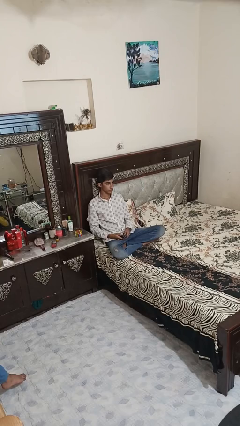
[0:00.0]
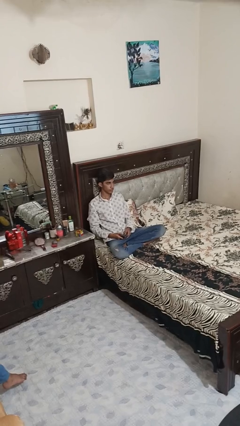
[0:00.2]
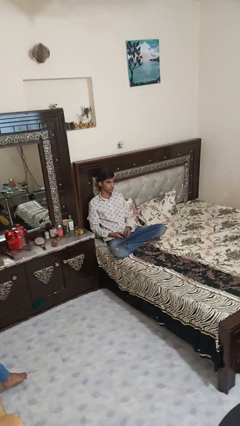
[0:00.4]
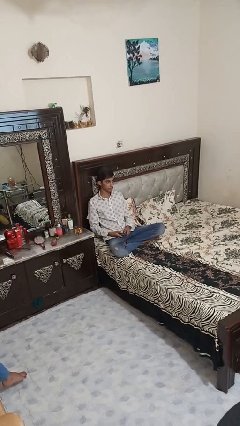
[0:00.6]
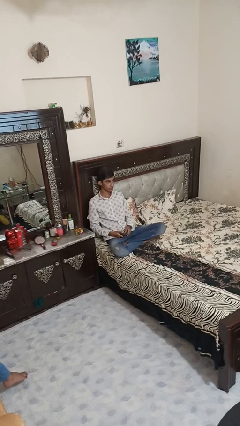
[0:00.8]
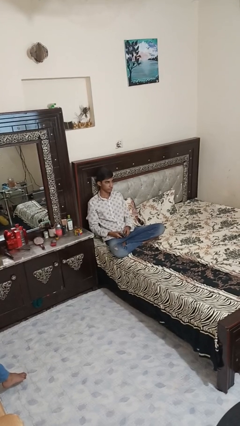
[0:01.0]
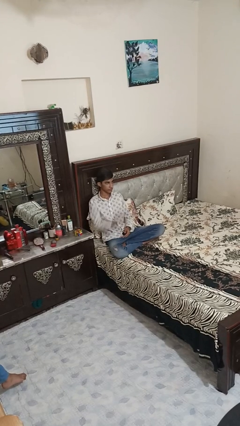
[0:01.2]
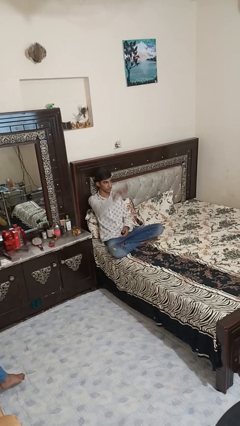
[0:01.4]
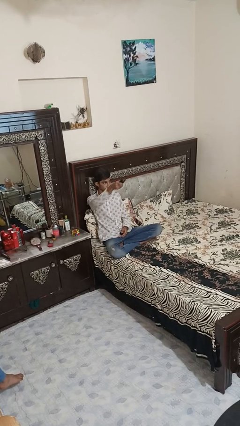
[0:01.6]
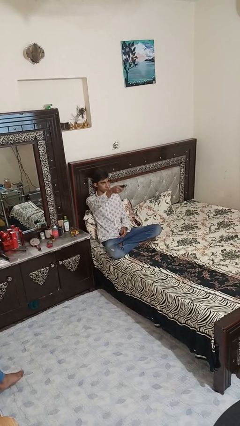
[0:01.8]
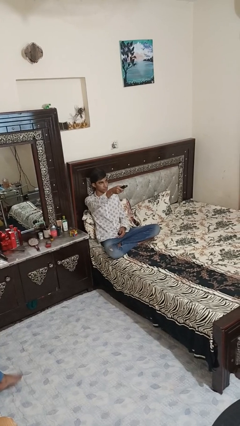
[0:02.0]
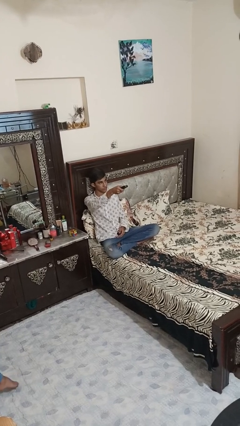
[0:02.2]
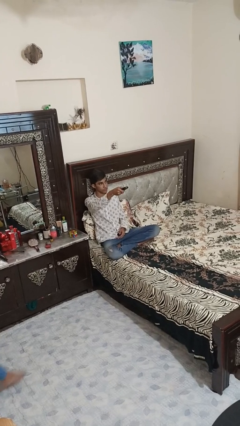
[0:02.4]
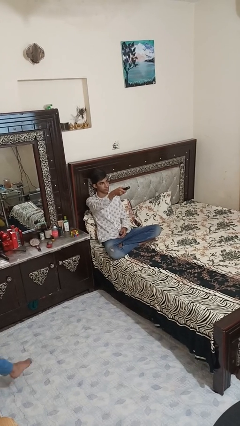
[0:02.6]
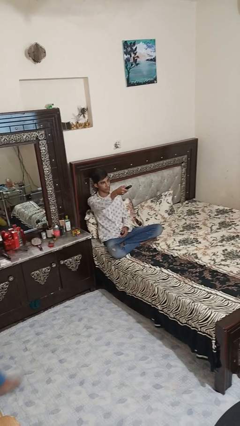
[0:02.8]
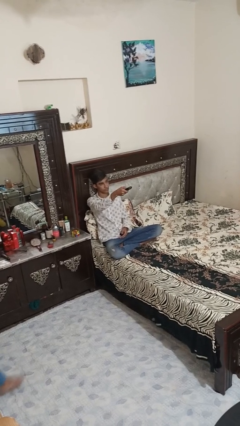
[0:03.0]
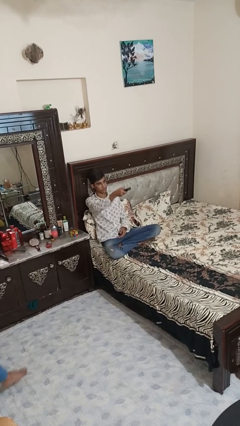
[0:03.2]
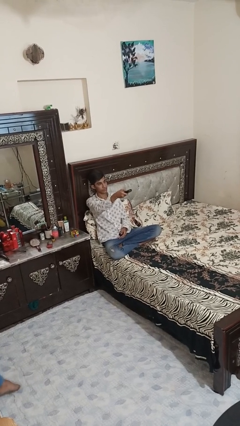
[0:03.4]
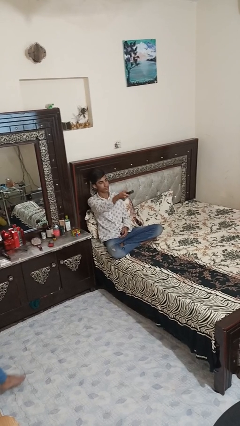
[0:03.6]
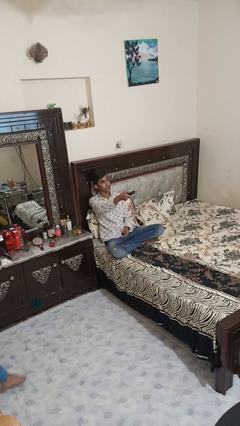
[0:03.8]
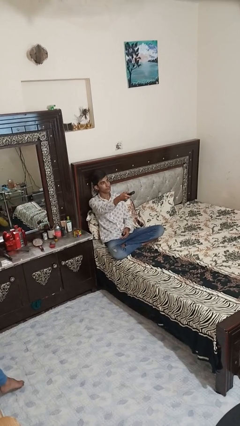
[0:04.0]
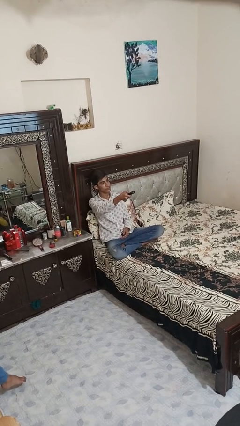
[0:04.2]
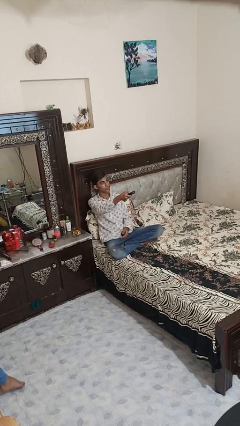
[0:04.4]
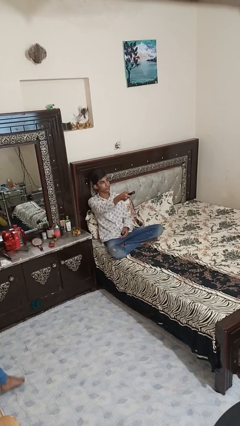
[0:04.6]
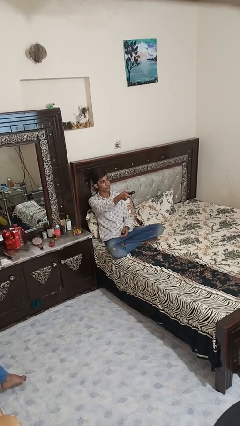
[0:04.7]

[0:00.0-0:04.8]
person uses television remote

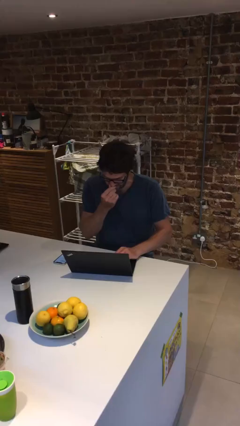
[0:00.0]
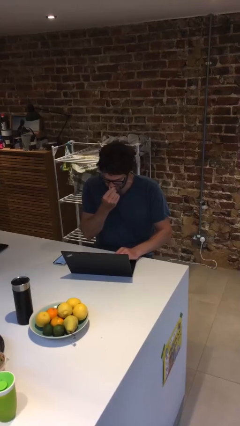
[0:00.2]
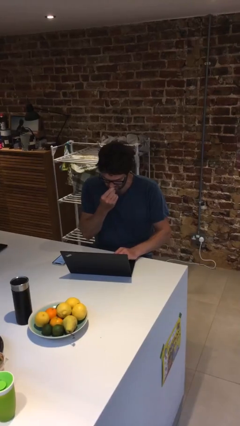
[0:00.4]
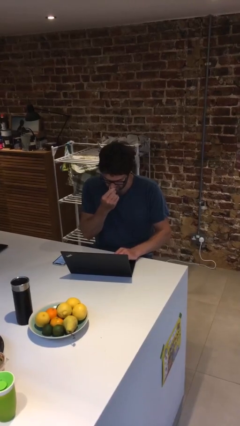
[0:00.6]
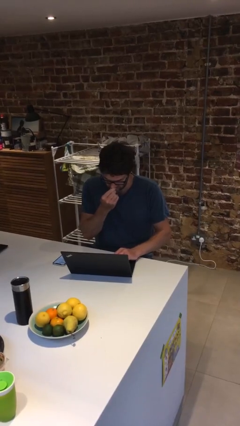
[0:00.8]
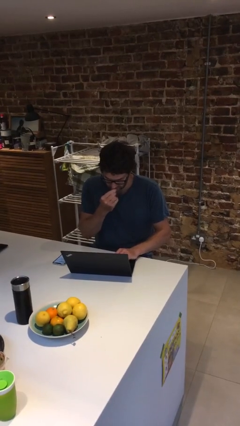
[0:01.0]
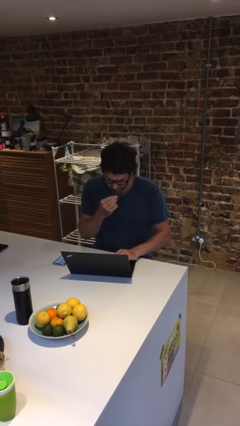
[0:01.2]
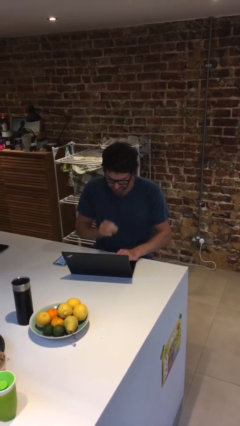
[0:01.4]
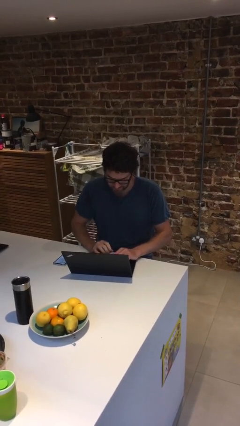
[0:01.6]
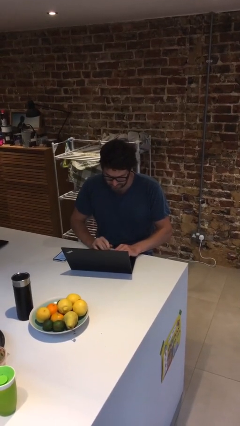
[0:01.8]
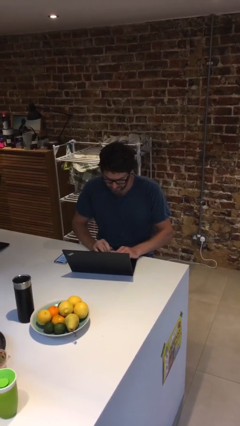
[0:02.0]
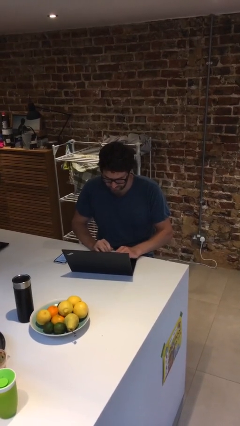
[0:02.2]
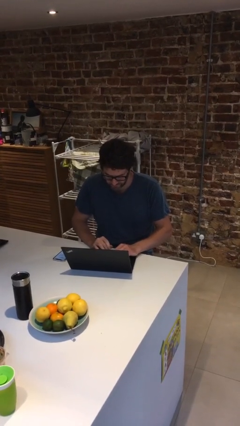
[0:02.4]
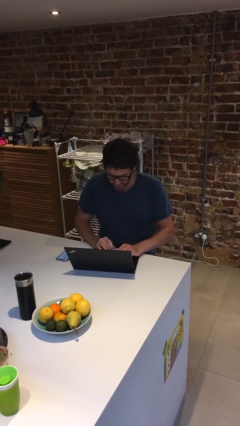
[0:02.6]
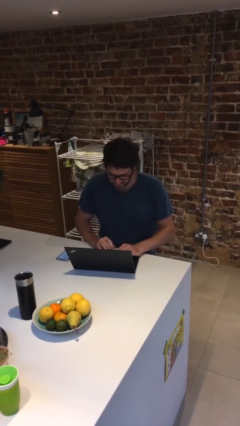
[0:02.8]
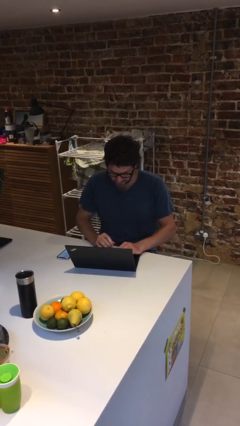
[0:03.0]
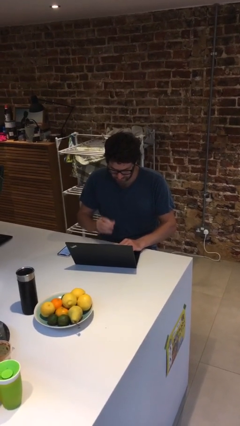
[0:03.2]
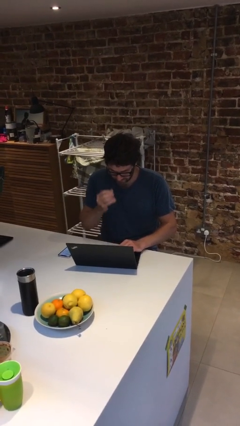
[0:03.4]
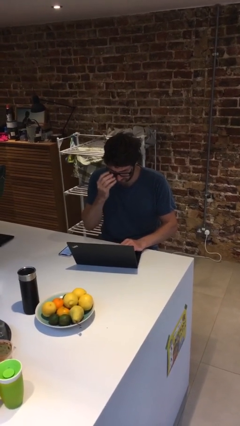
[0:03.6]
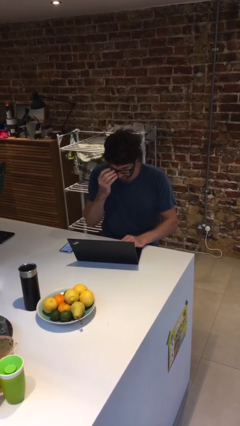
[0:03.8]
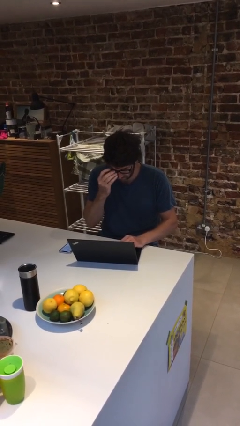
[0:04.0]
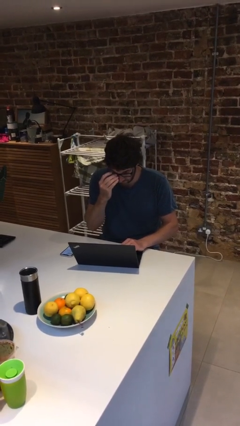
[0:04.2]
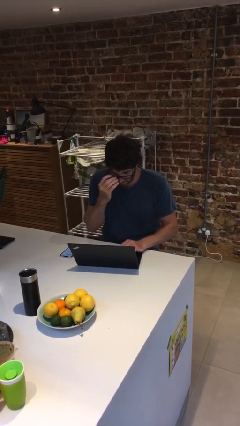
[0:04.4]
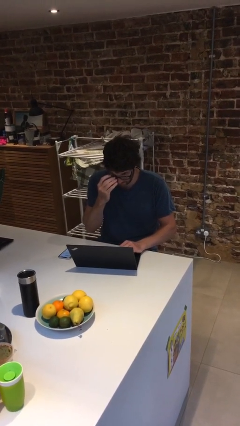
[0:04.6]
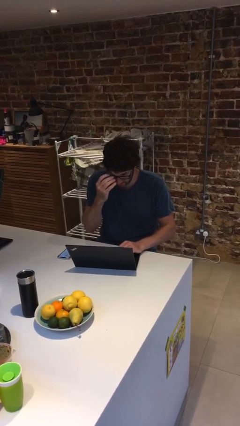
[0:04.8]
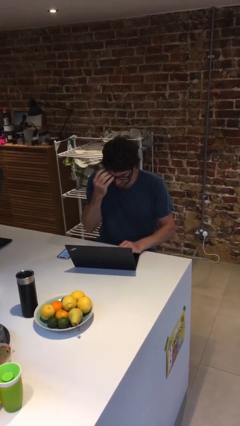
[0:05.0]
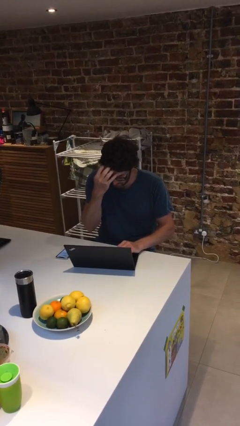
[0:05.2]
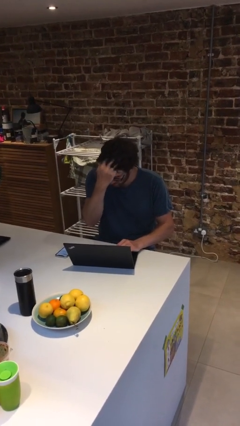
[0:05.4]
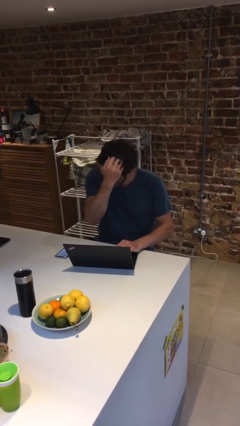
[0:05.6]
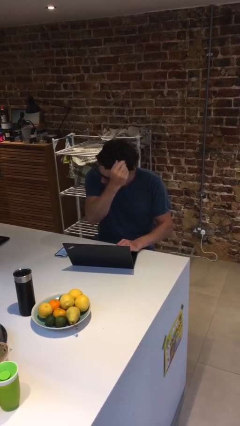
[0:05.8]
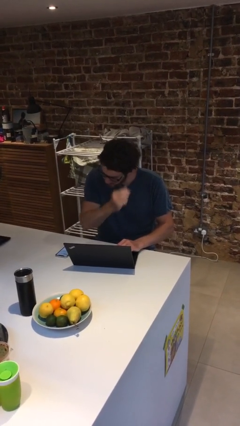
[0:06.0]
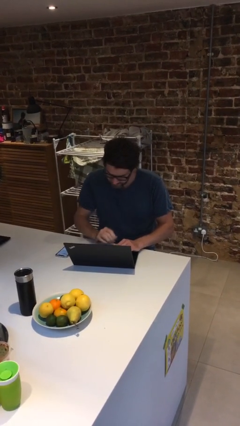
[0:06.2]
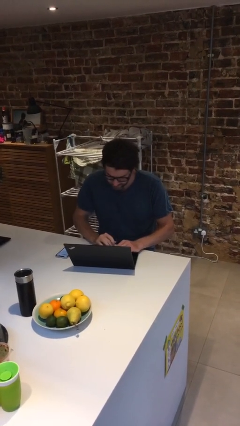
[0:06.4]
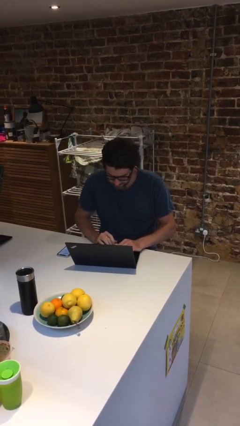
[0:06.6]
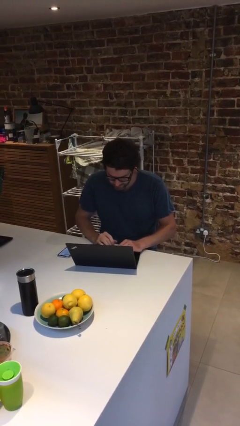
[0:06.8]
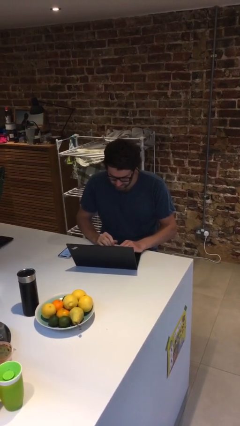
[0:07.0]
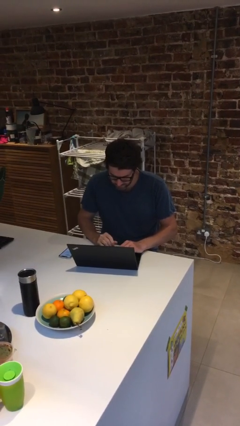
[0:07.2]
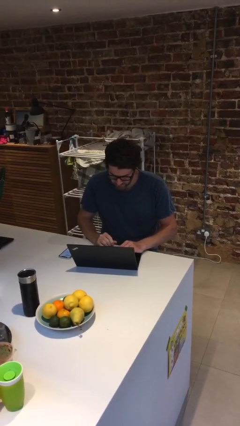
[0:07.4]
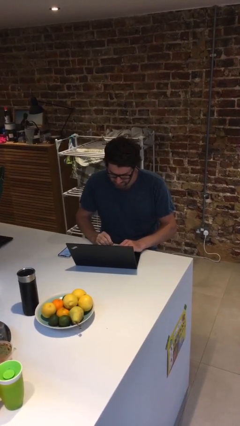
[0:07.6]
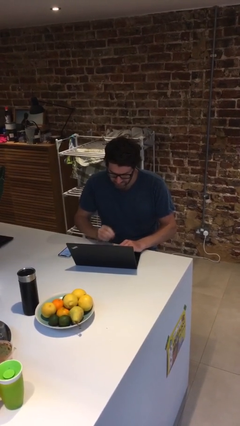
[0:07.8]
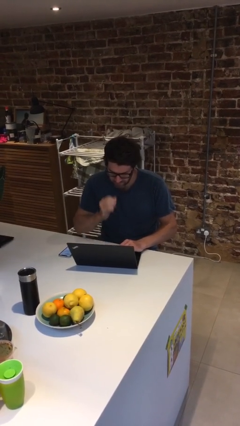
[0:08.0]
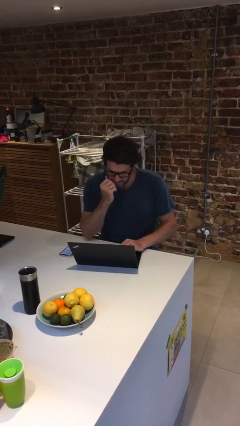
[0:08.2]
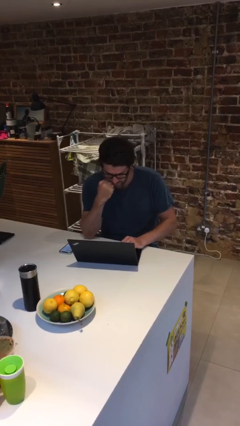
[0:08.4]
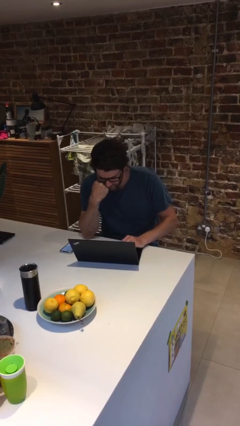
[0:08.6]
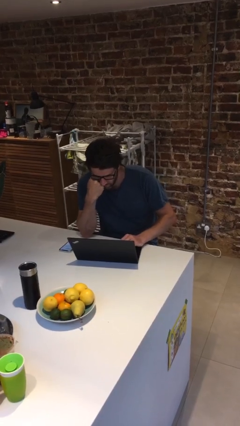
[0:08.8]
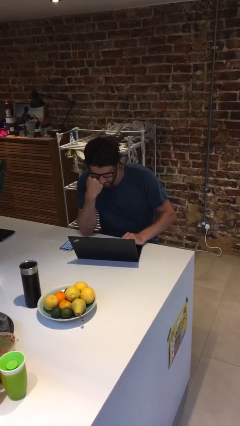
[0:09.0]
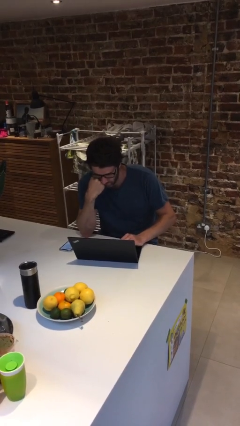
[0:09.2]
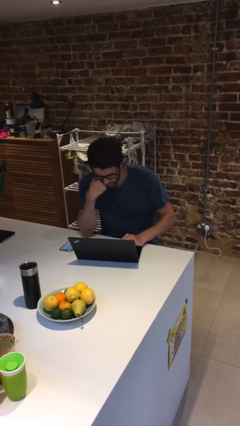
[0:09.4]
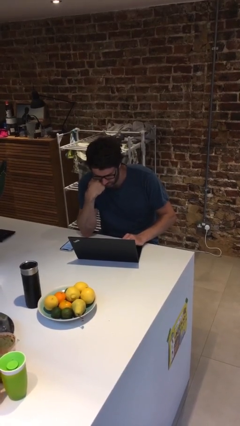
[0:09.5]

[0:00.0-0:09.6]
person interacts with laptop

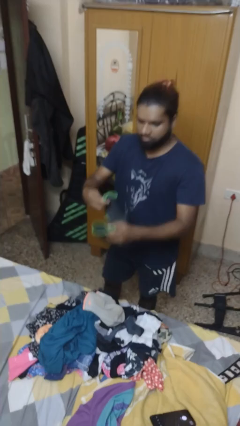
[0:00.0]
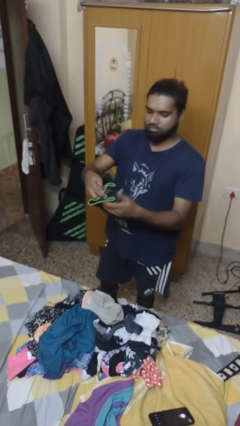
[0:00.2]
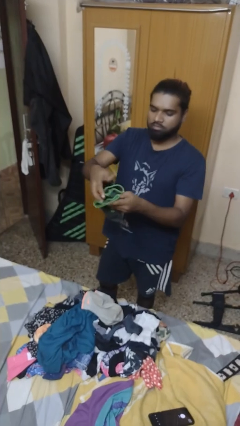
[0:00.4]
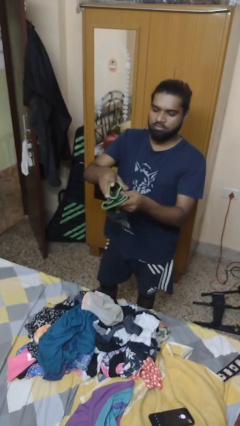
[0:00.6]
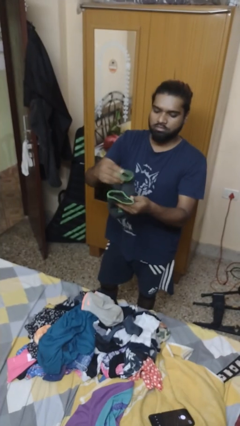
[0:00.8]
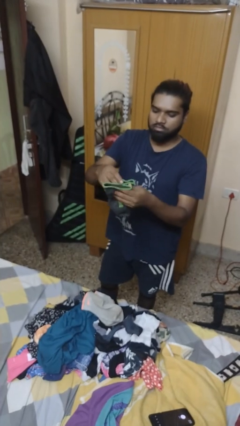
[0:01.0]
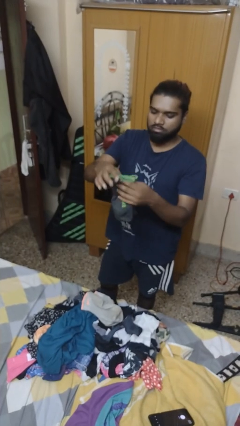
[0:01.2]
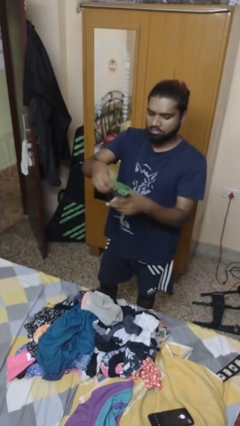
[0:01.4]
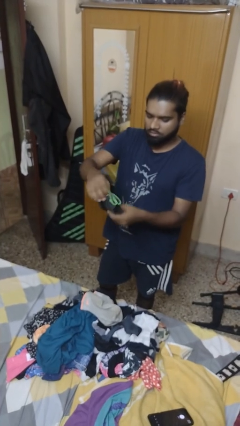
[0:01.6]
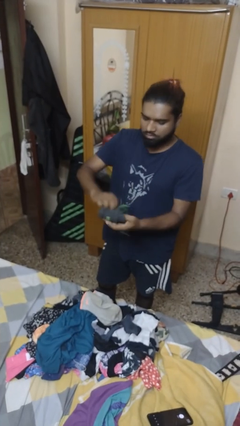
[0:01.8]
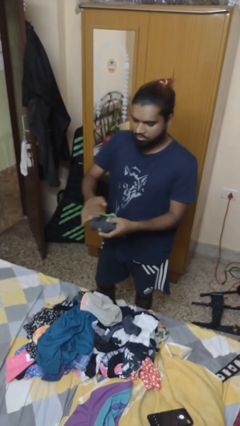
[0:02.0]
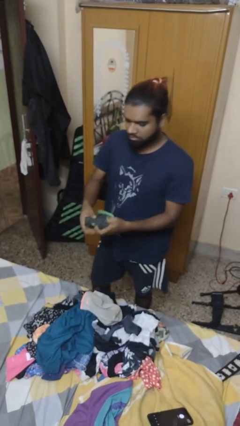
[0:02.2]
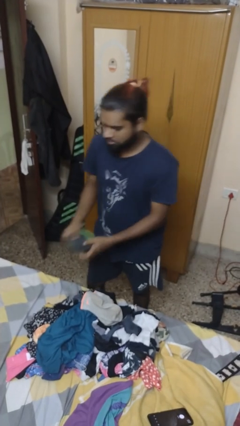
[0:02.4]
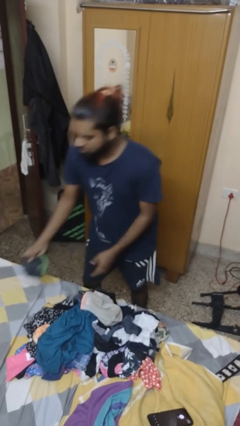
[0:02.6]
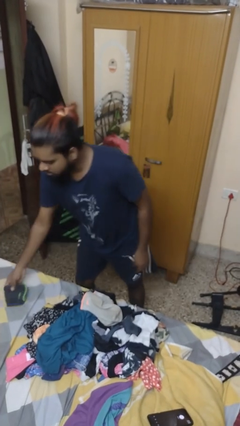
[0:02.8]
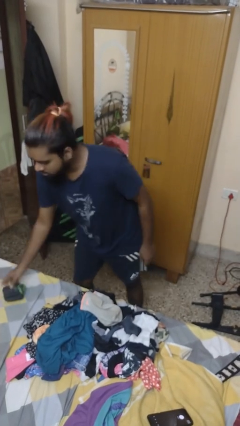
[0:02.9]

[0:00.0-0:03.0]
person folds socks

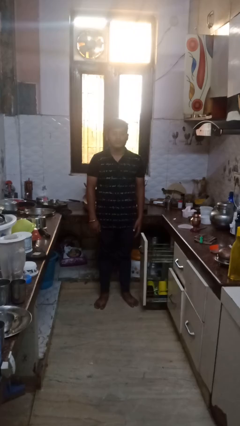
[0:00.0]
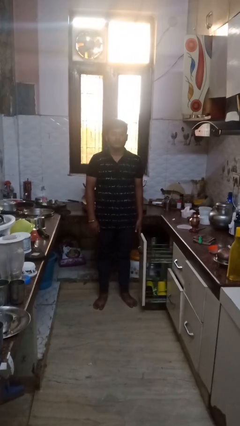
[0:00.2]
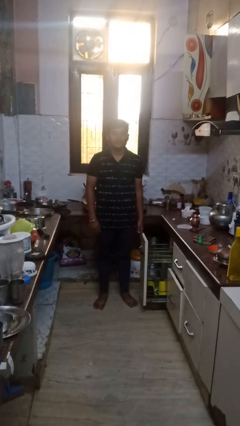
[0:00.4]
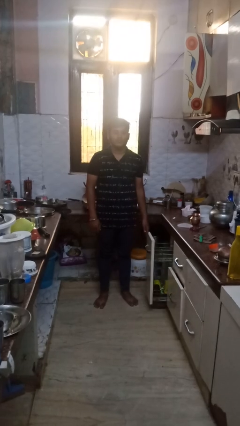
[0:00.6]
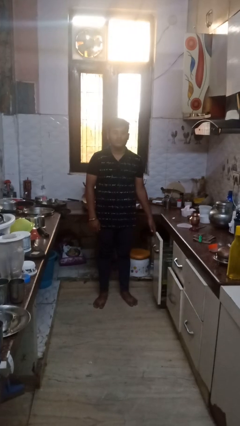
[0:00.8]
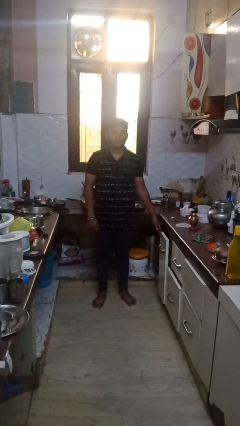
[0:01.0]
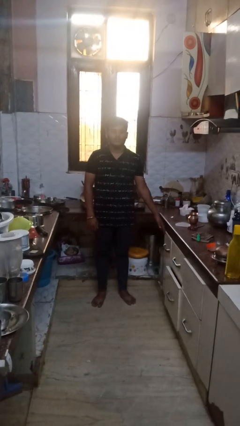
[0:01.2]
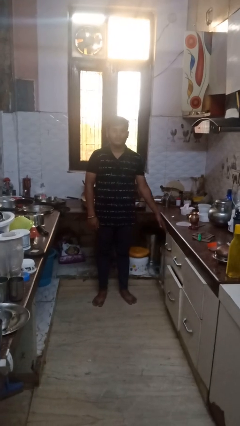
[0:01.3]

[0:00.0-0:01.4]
person closes dishwasher
